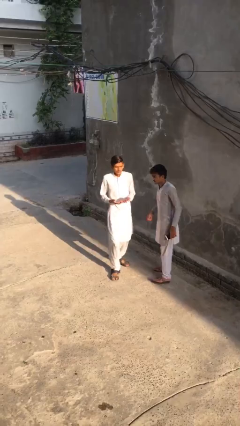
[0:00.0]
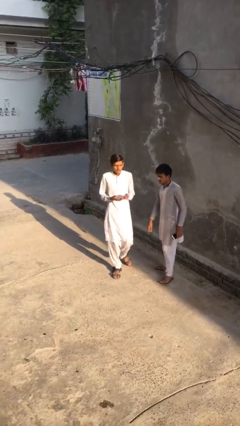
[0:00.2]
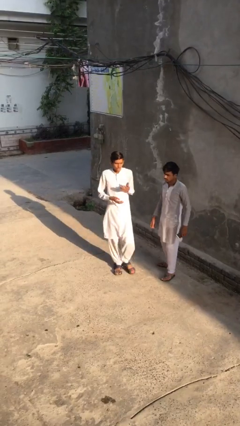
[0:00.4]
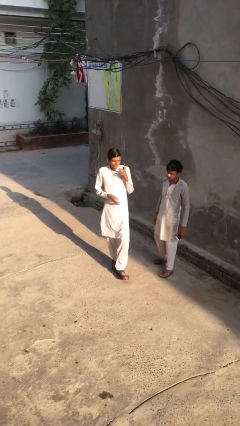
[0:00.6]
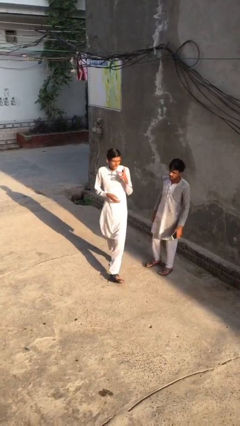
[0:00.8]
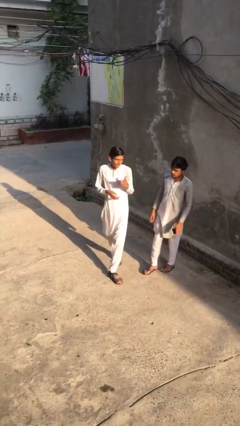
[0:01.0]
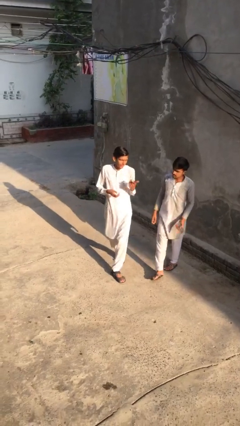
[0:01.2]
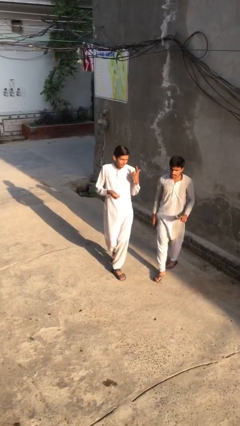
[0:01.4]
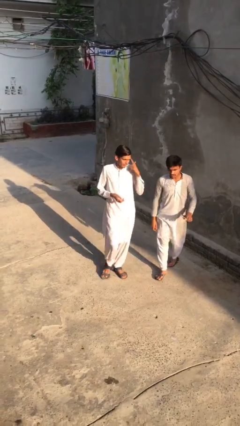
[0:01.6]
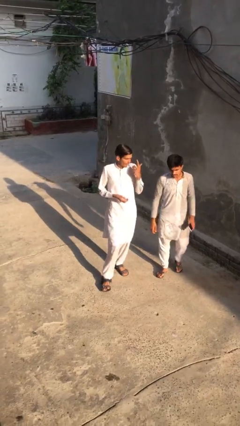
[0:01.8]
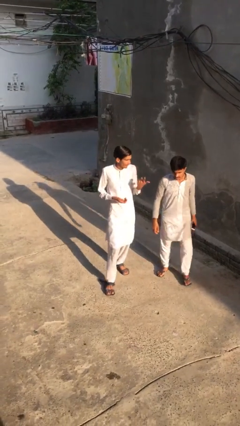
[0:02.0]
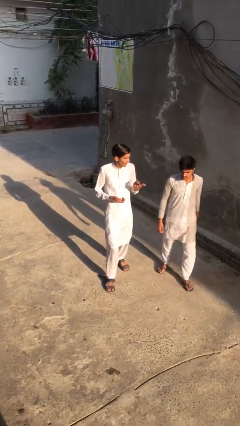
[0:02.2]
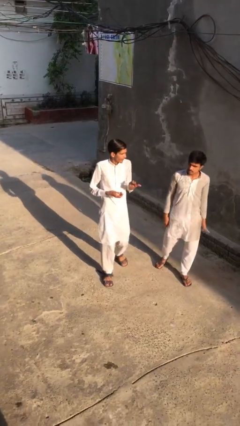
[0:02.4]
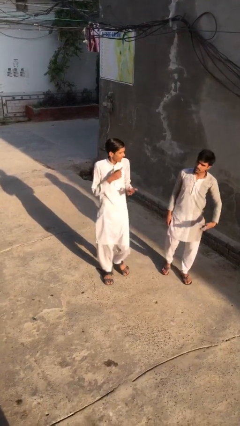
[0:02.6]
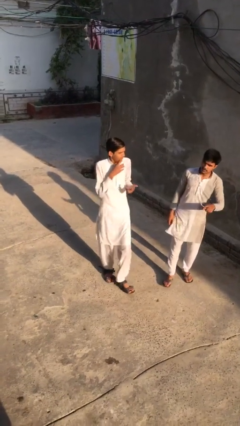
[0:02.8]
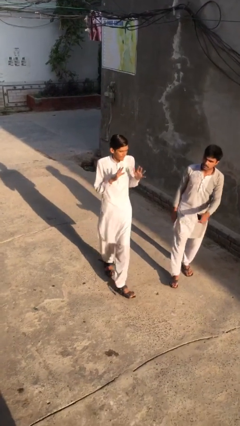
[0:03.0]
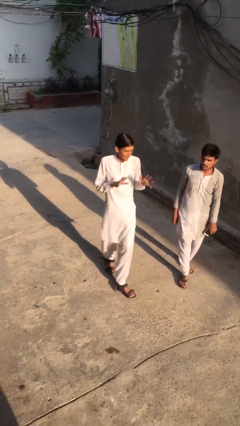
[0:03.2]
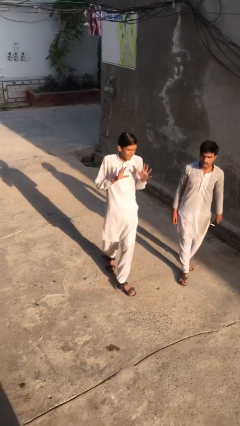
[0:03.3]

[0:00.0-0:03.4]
person talks to person

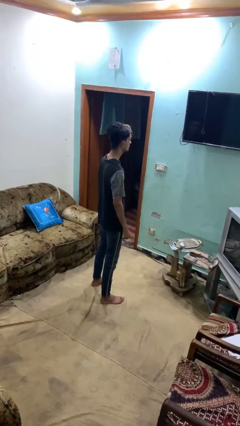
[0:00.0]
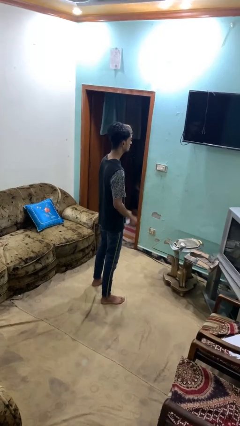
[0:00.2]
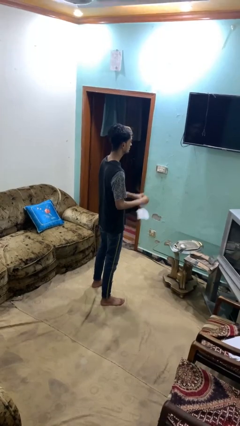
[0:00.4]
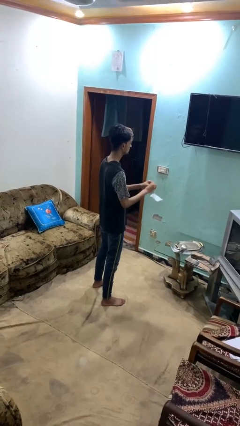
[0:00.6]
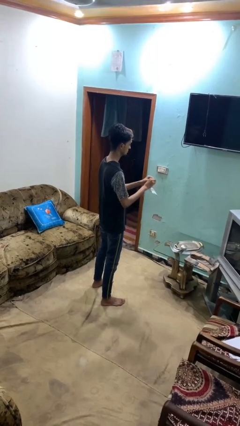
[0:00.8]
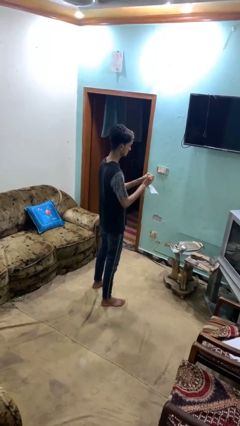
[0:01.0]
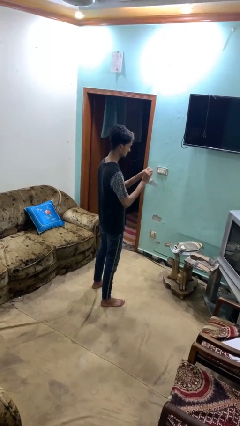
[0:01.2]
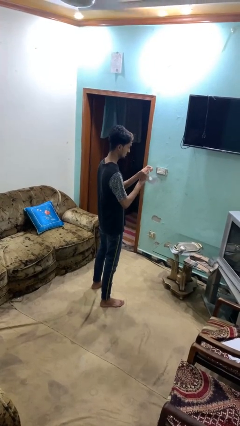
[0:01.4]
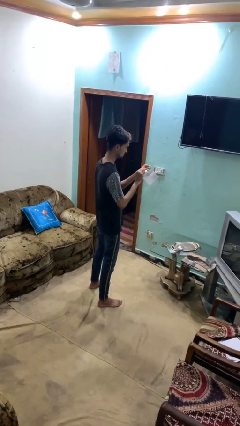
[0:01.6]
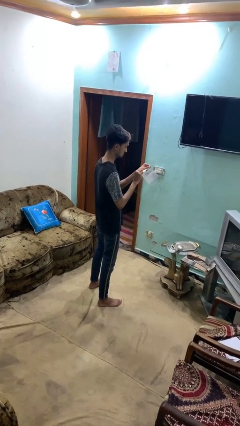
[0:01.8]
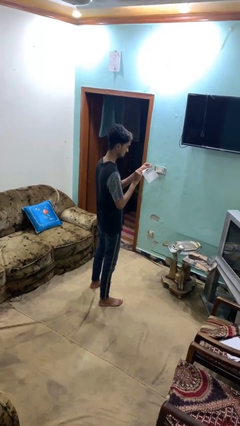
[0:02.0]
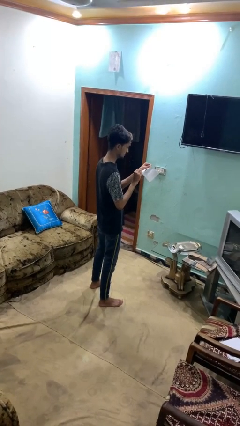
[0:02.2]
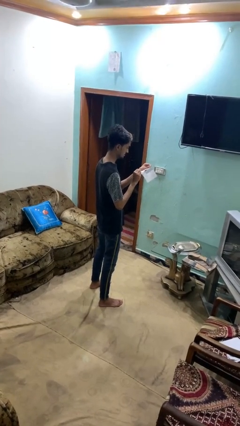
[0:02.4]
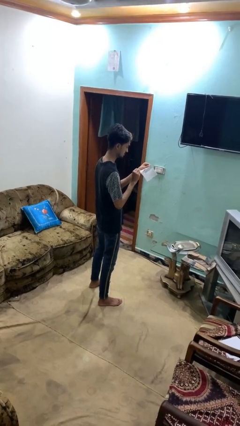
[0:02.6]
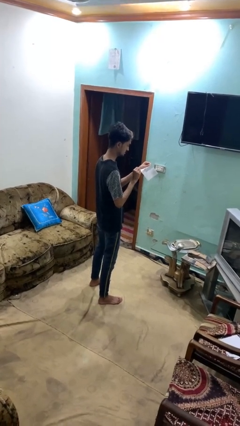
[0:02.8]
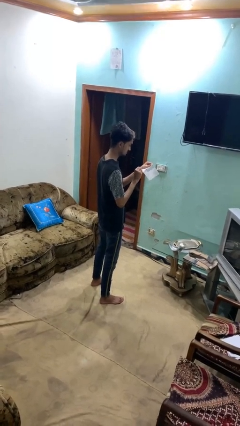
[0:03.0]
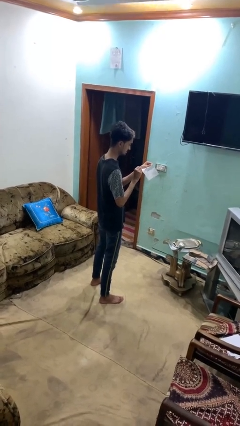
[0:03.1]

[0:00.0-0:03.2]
person tears paper

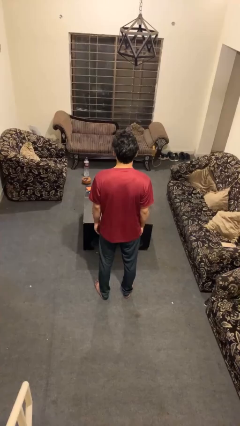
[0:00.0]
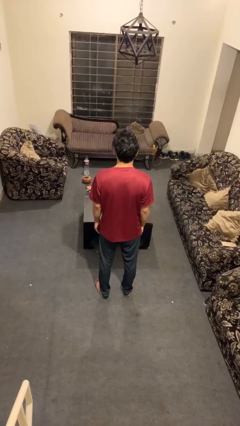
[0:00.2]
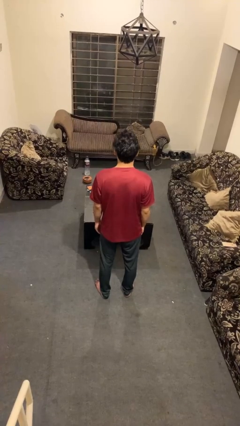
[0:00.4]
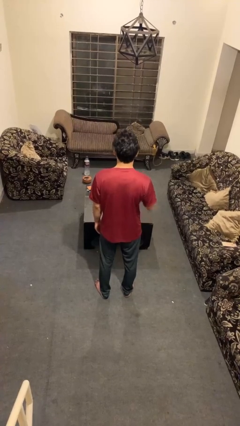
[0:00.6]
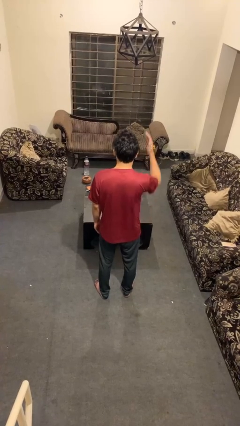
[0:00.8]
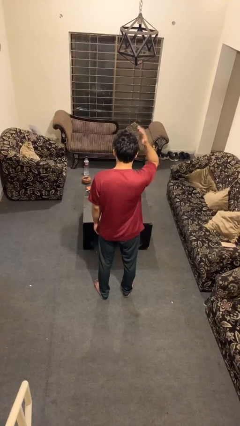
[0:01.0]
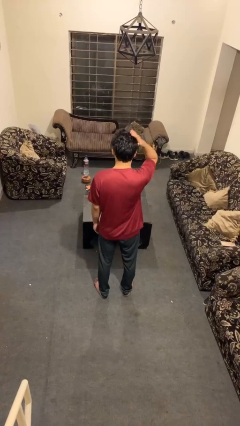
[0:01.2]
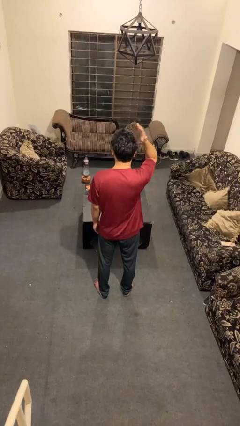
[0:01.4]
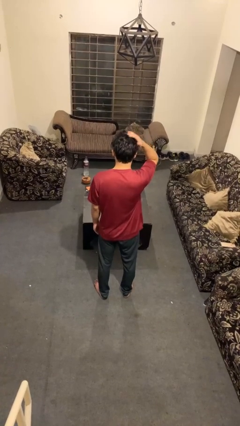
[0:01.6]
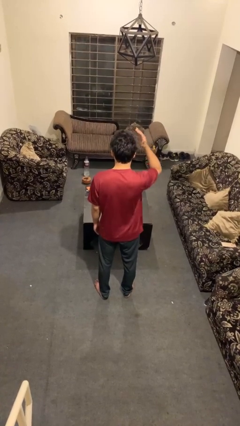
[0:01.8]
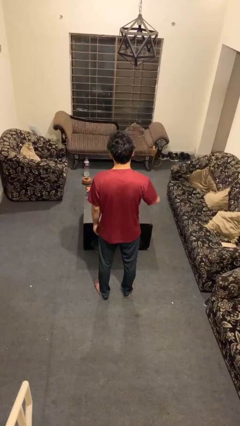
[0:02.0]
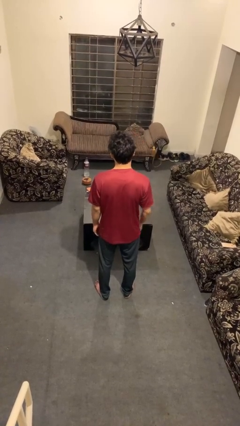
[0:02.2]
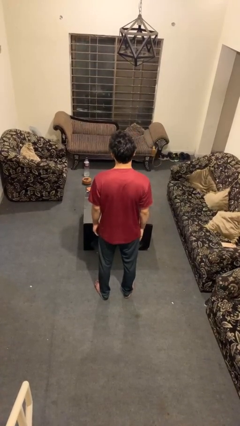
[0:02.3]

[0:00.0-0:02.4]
person pats head

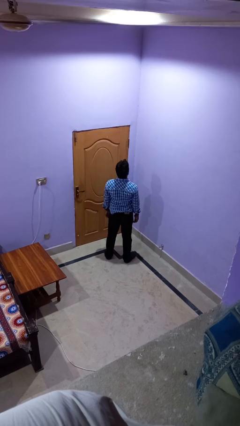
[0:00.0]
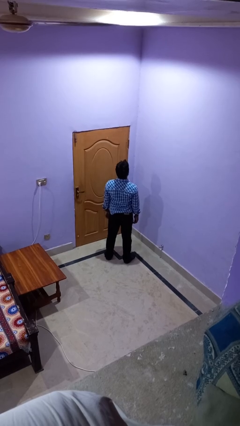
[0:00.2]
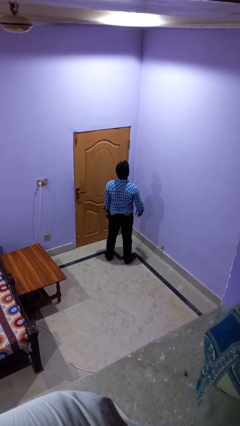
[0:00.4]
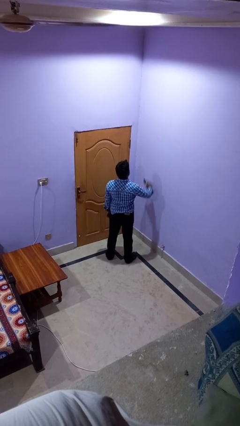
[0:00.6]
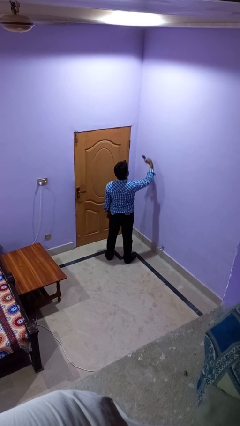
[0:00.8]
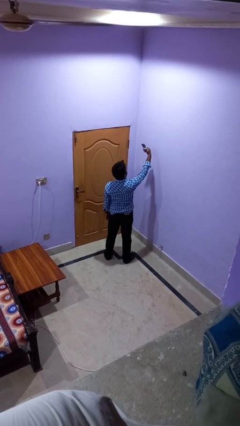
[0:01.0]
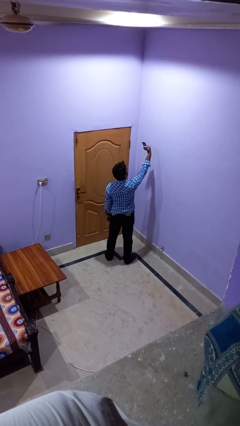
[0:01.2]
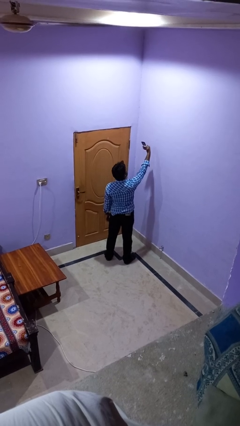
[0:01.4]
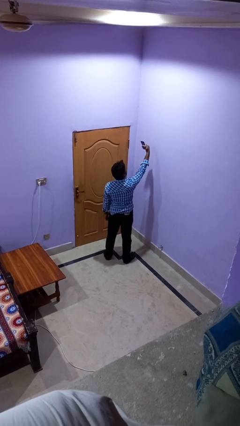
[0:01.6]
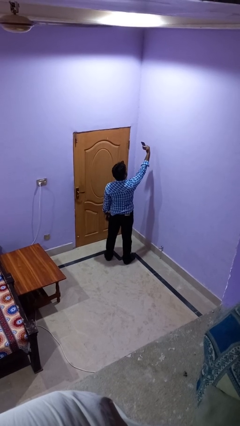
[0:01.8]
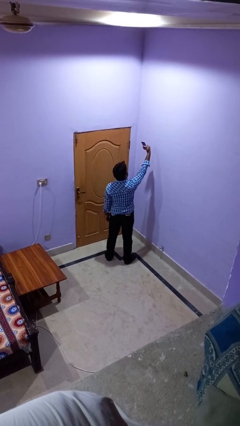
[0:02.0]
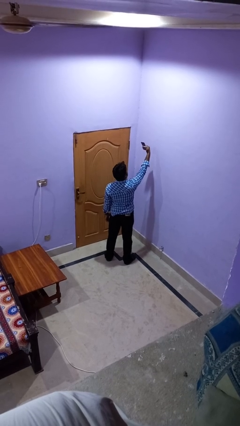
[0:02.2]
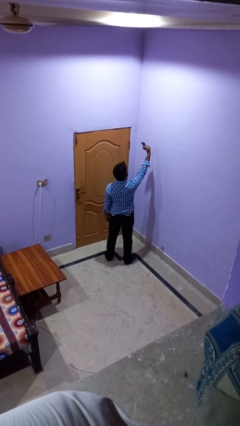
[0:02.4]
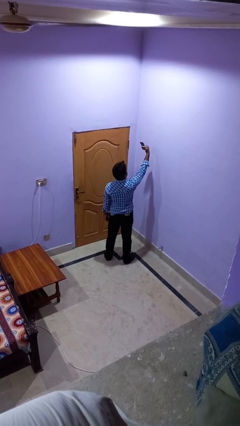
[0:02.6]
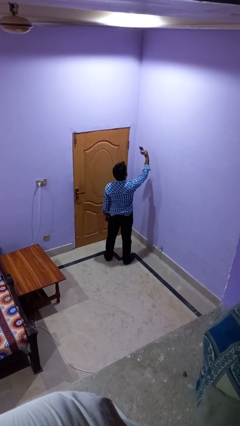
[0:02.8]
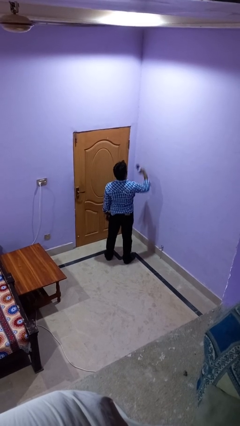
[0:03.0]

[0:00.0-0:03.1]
person takes selfie

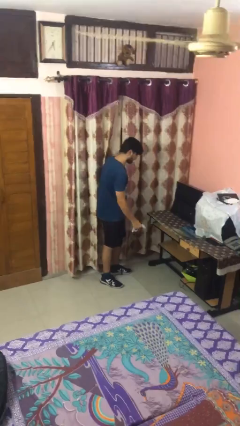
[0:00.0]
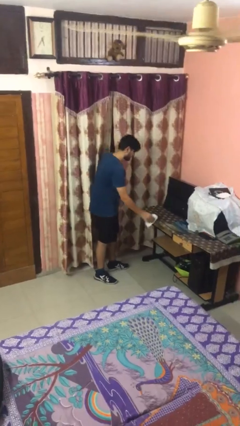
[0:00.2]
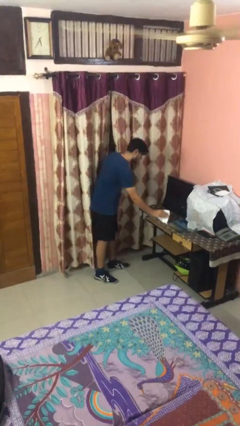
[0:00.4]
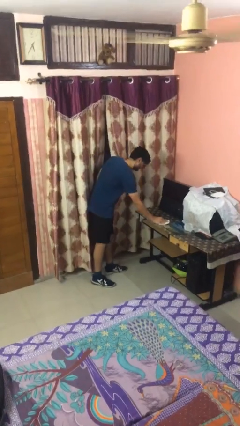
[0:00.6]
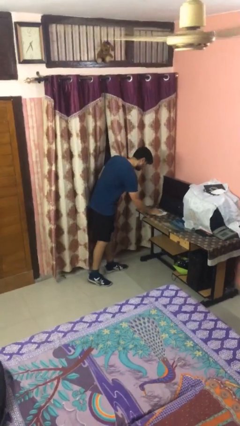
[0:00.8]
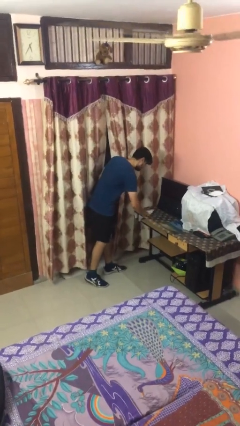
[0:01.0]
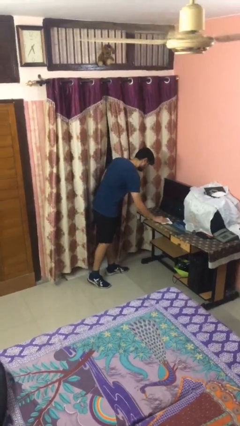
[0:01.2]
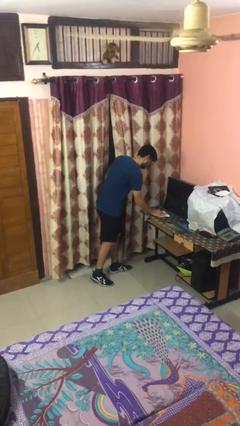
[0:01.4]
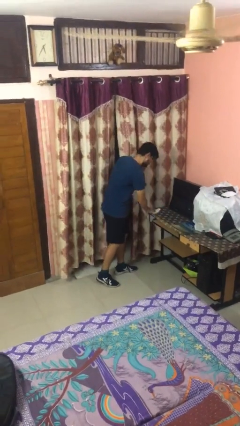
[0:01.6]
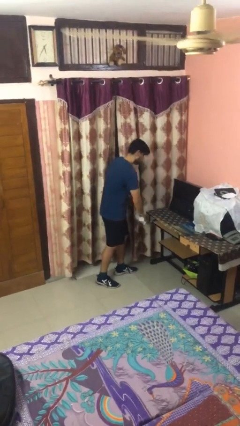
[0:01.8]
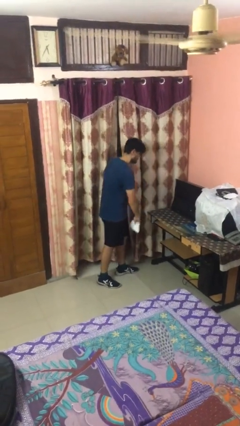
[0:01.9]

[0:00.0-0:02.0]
person cleans table with rag

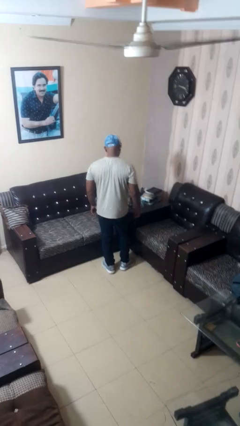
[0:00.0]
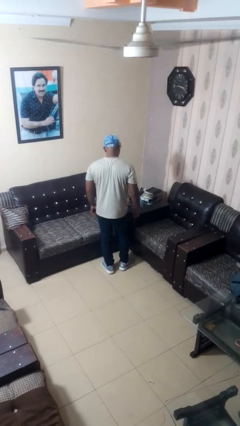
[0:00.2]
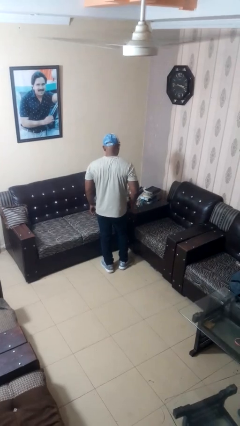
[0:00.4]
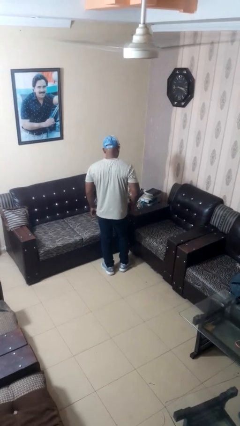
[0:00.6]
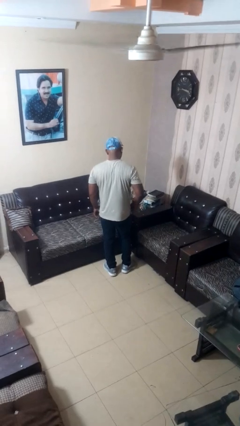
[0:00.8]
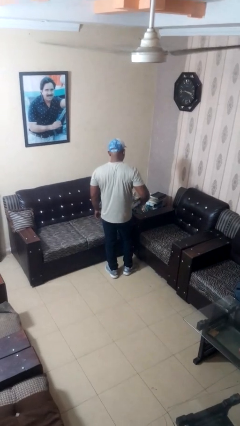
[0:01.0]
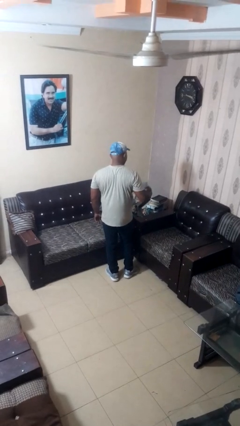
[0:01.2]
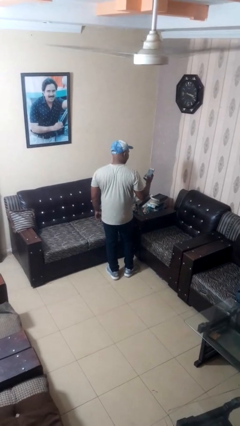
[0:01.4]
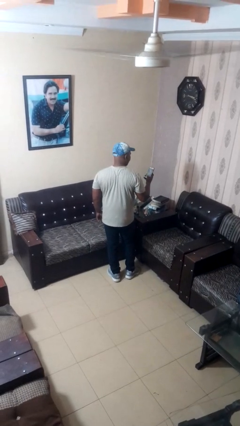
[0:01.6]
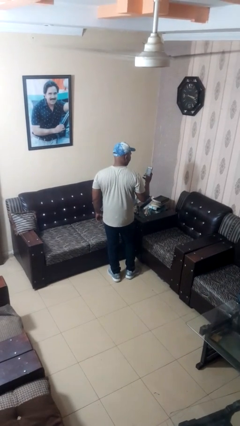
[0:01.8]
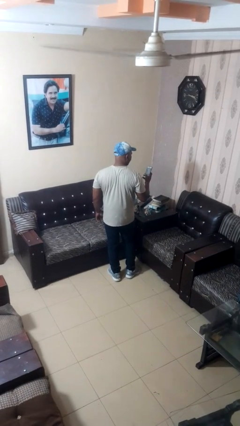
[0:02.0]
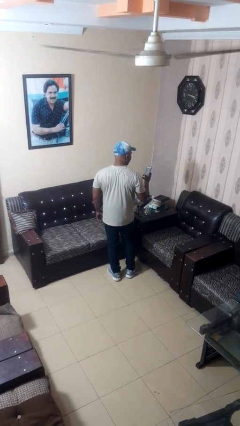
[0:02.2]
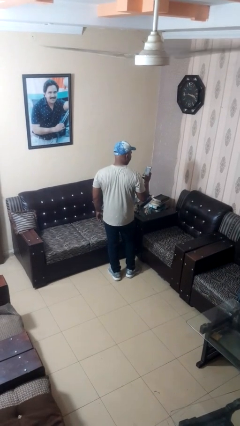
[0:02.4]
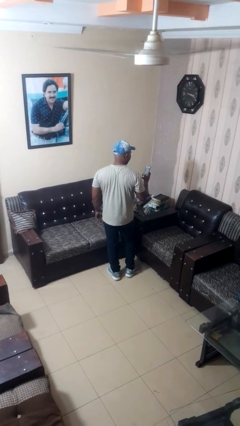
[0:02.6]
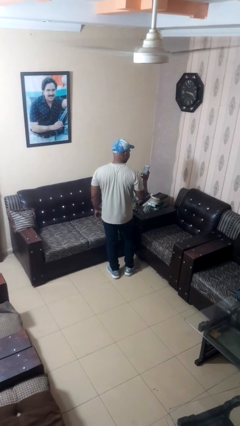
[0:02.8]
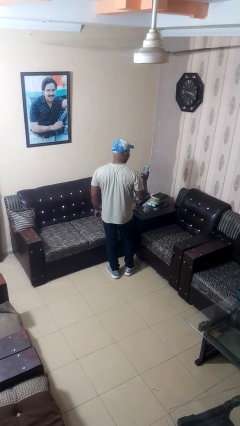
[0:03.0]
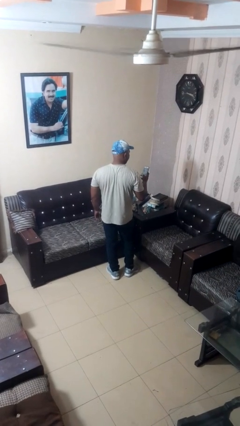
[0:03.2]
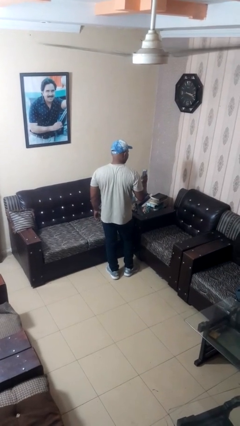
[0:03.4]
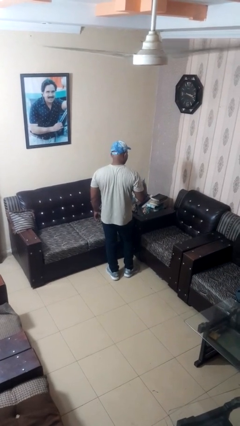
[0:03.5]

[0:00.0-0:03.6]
person takes phone from pocket
